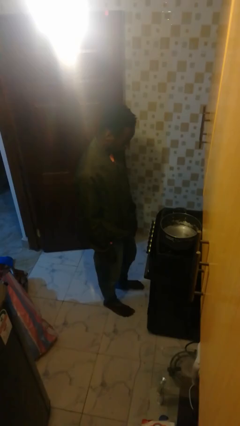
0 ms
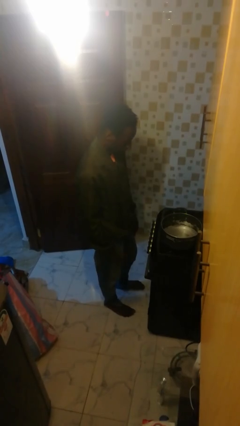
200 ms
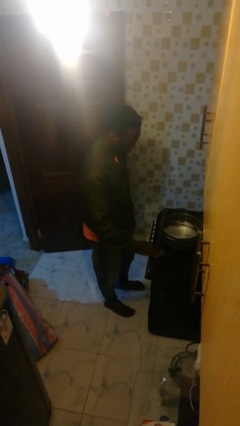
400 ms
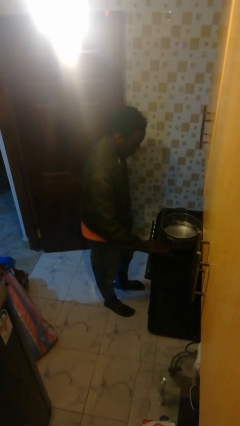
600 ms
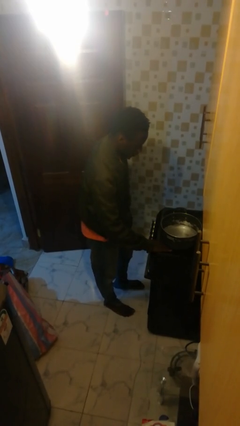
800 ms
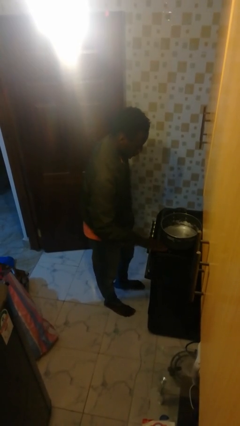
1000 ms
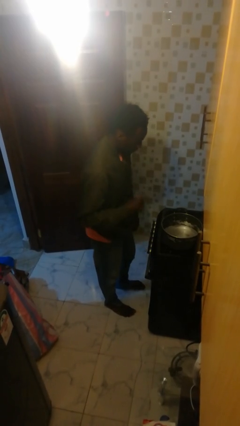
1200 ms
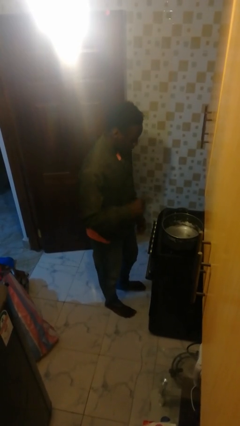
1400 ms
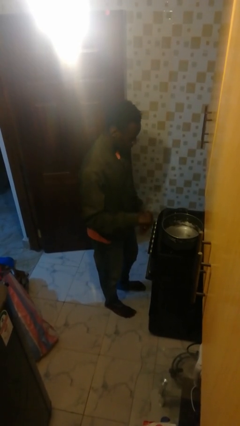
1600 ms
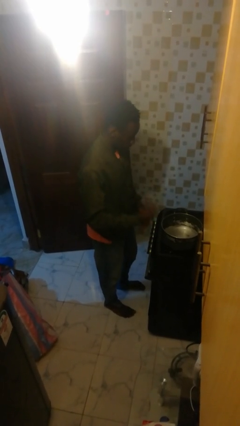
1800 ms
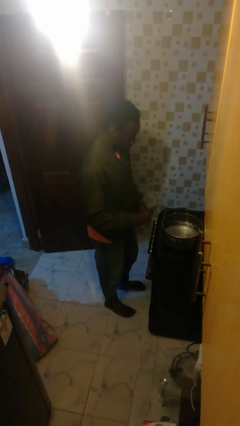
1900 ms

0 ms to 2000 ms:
person burns hand

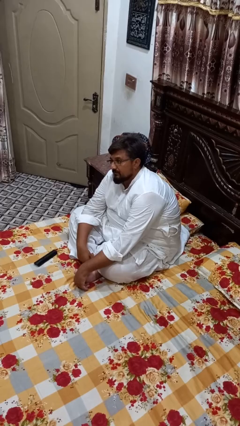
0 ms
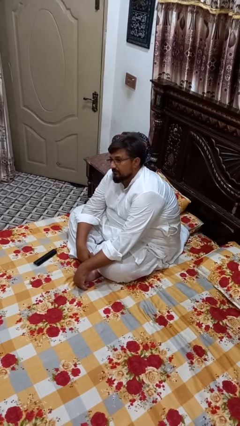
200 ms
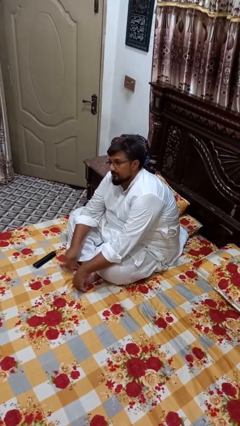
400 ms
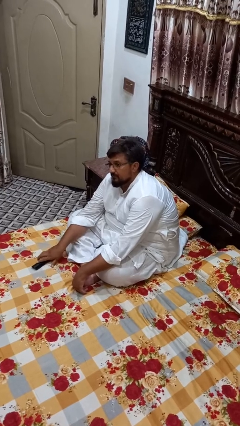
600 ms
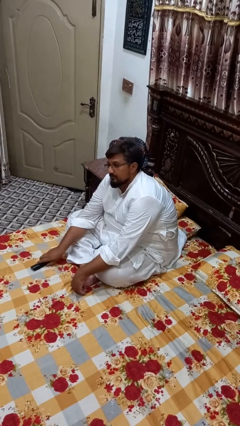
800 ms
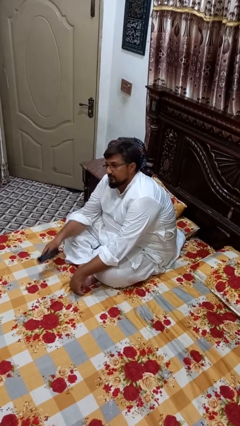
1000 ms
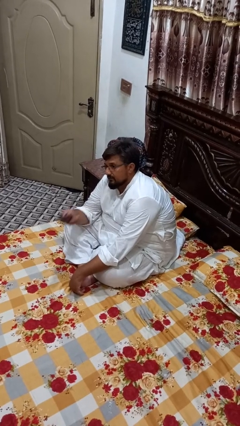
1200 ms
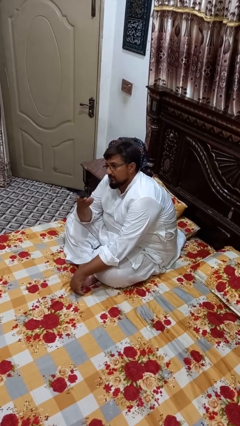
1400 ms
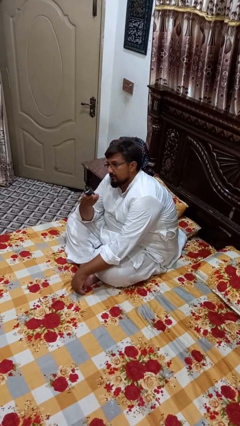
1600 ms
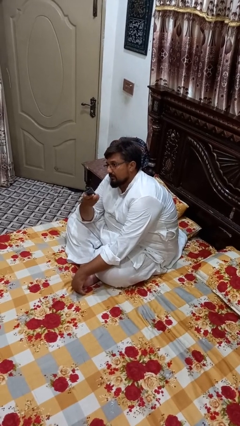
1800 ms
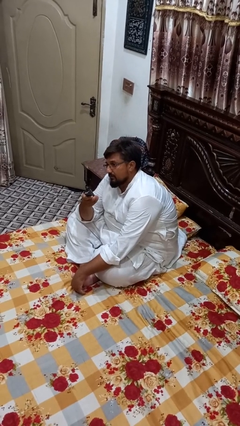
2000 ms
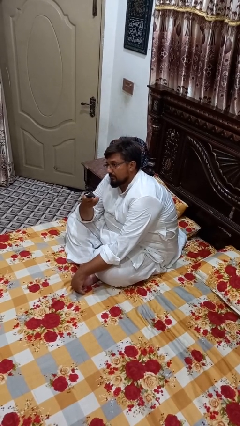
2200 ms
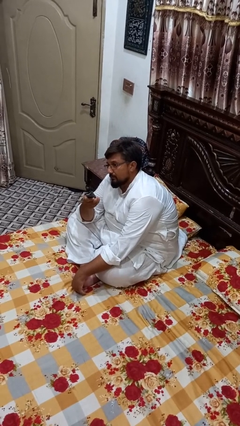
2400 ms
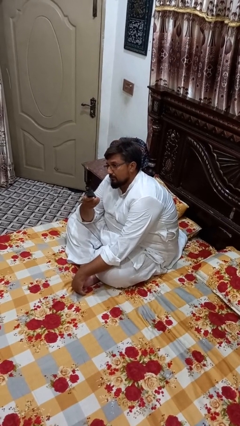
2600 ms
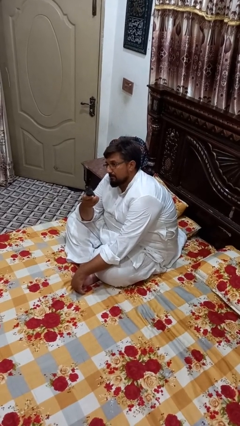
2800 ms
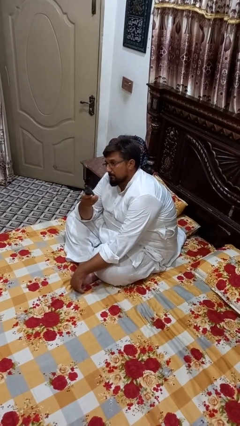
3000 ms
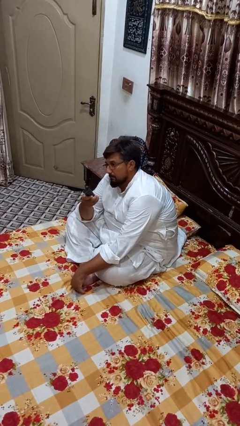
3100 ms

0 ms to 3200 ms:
person uses television remote

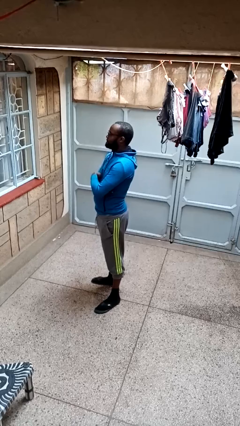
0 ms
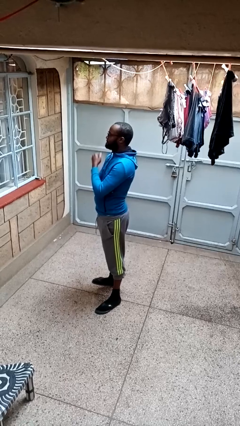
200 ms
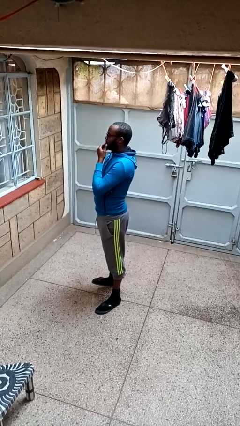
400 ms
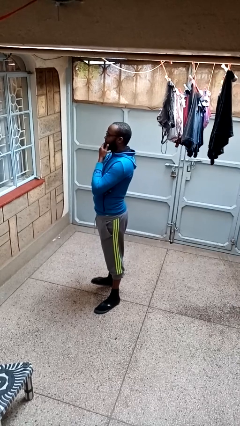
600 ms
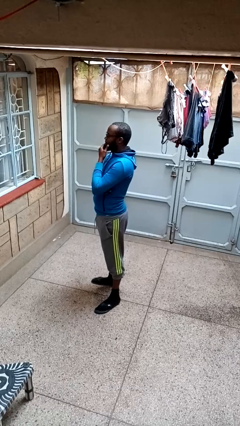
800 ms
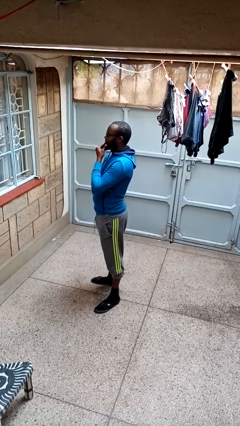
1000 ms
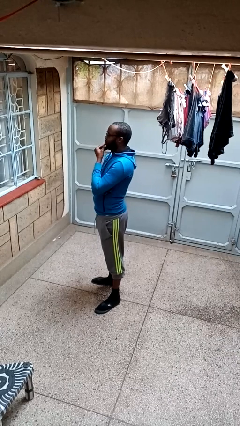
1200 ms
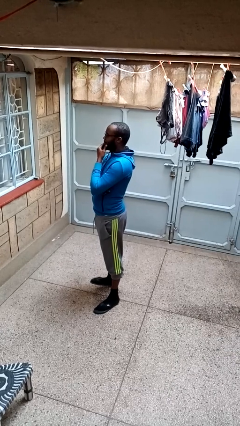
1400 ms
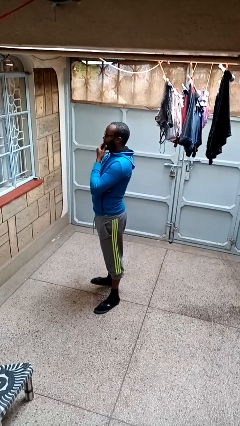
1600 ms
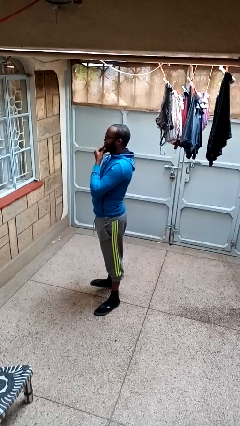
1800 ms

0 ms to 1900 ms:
person strokes chin

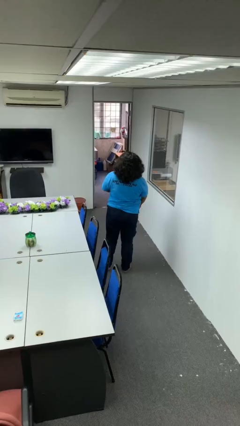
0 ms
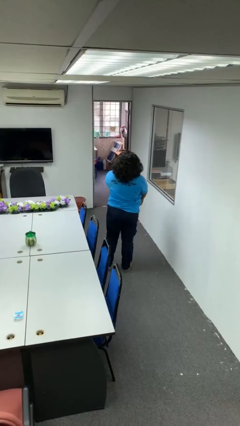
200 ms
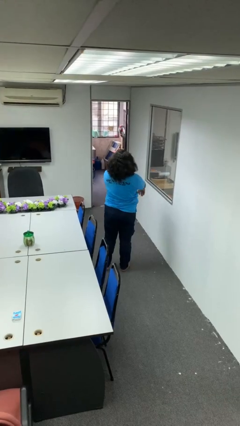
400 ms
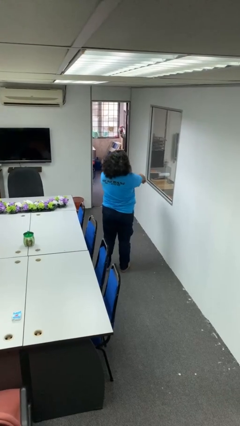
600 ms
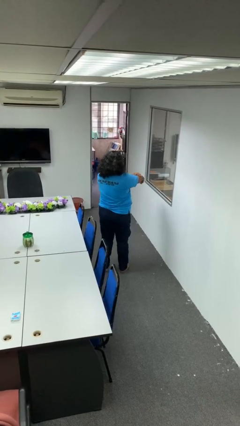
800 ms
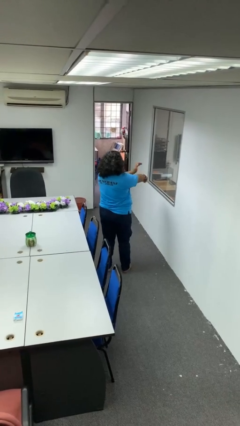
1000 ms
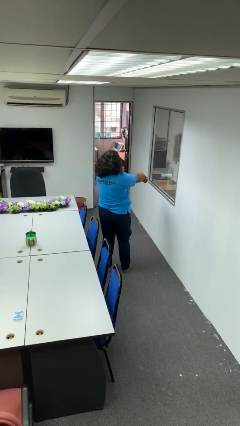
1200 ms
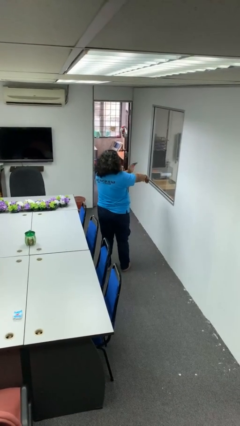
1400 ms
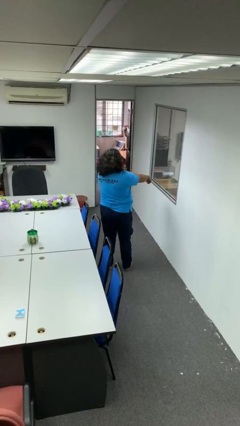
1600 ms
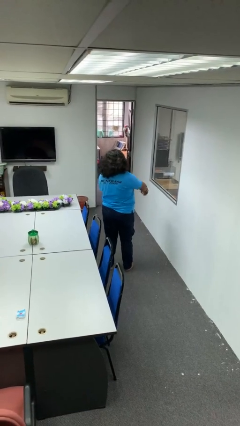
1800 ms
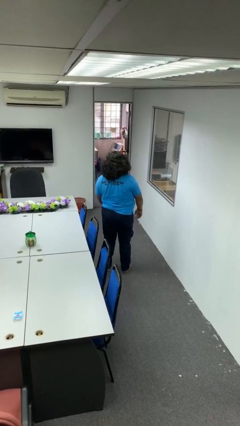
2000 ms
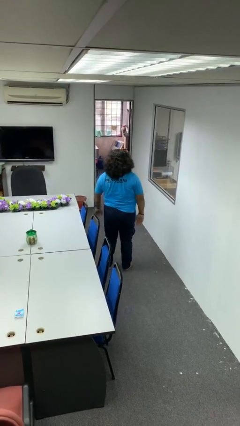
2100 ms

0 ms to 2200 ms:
person swats bug

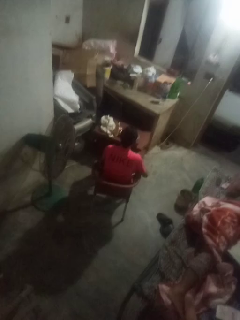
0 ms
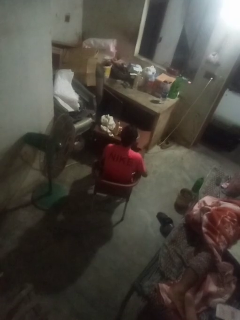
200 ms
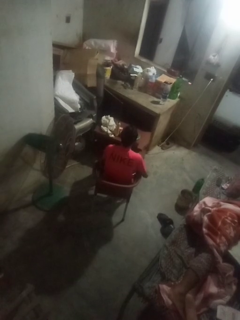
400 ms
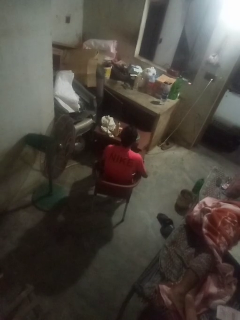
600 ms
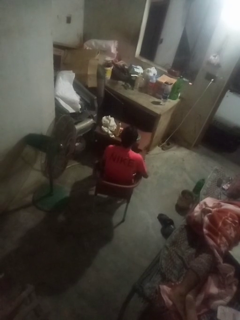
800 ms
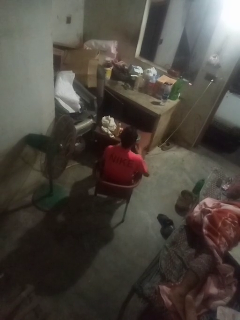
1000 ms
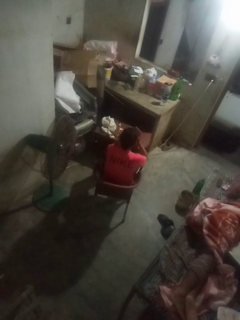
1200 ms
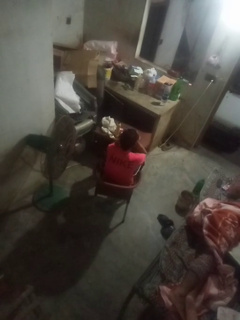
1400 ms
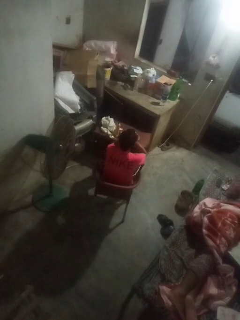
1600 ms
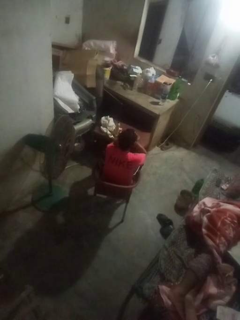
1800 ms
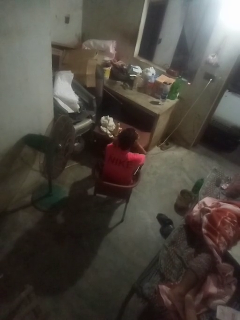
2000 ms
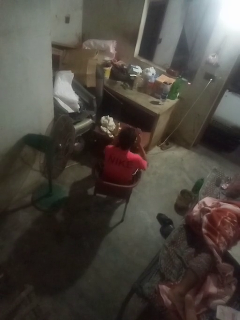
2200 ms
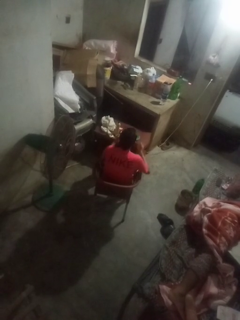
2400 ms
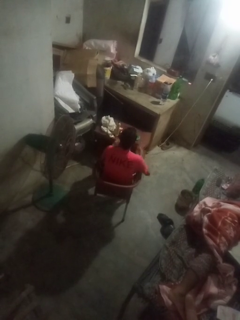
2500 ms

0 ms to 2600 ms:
person yawns

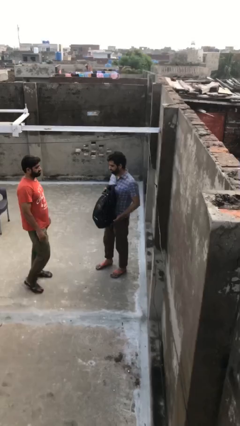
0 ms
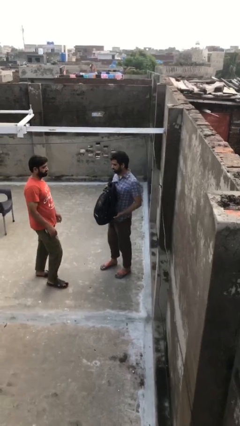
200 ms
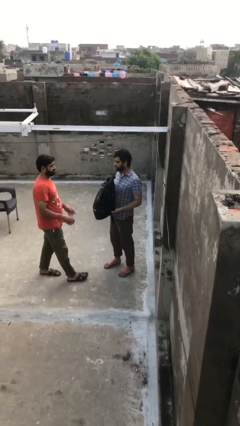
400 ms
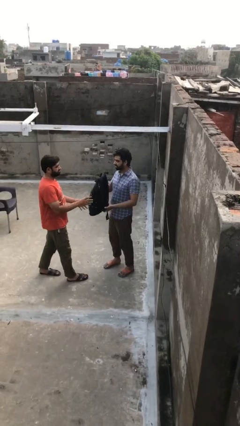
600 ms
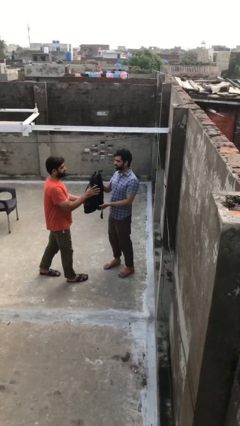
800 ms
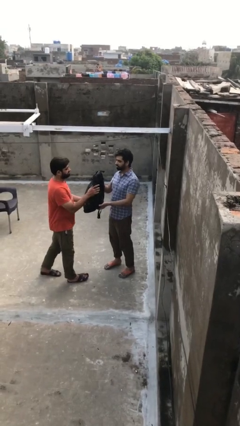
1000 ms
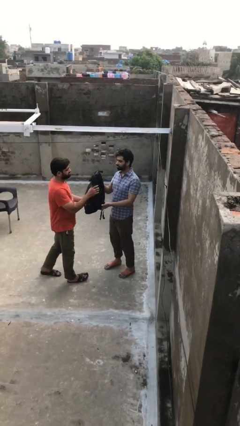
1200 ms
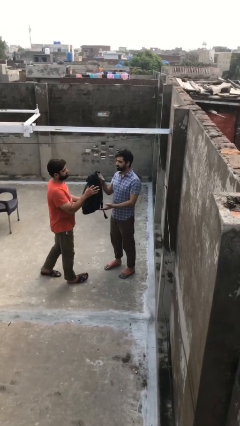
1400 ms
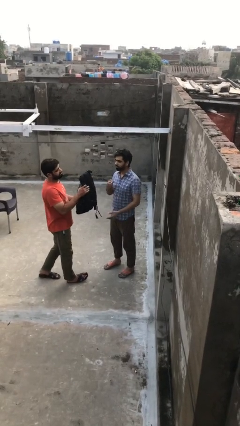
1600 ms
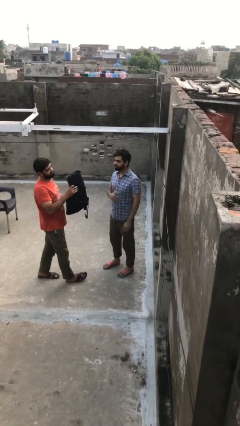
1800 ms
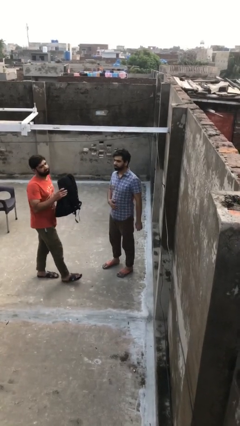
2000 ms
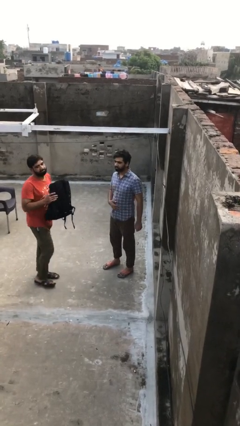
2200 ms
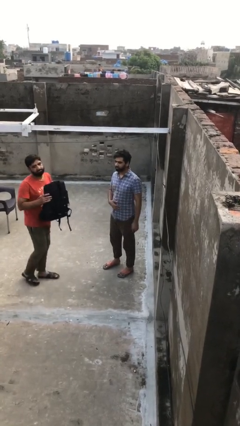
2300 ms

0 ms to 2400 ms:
person transfers object to person

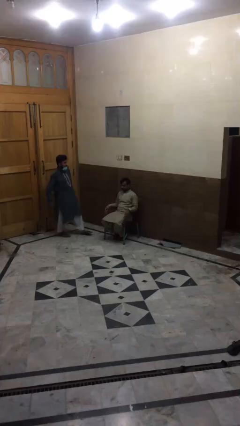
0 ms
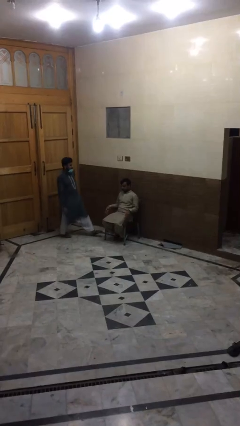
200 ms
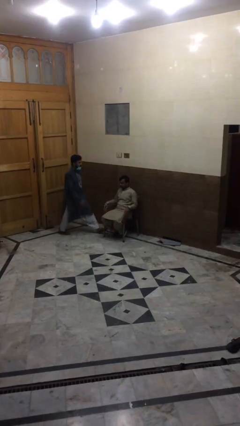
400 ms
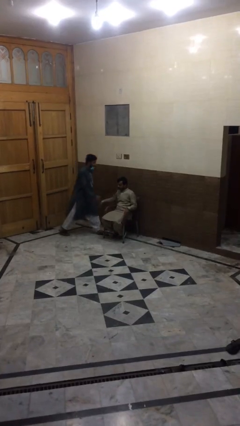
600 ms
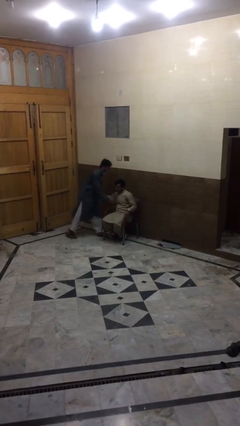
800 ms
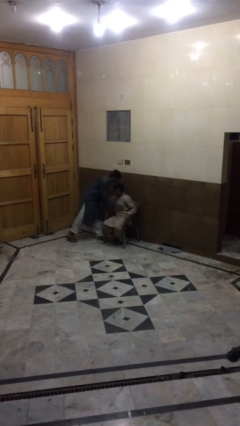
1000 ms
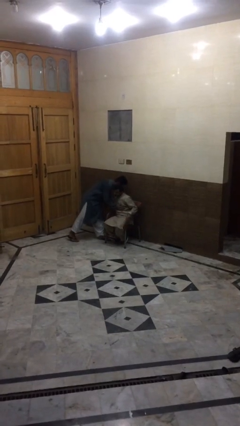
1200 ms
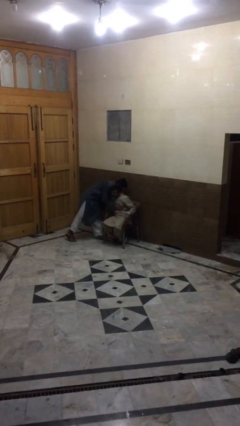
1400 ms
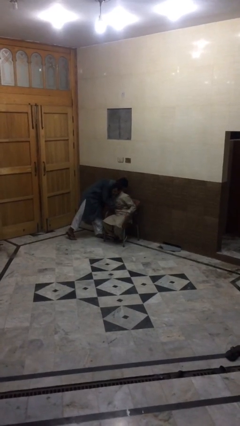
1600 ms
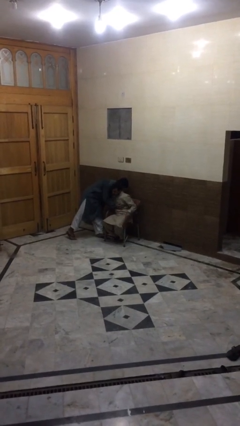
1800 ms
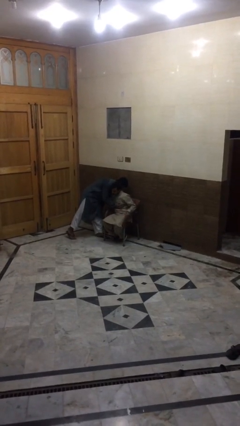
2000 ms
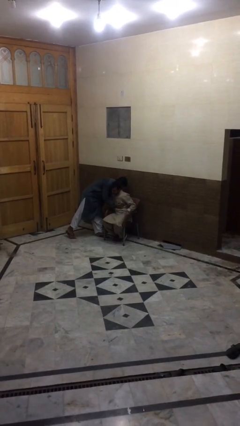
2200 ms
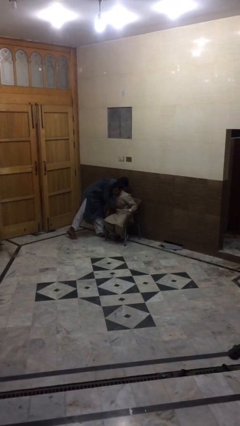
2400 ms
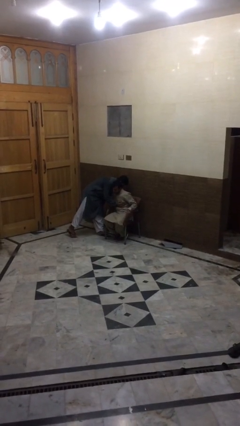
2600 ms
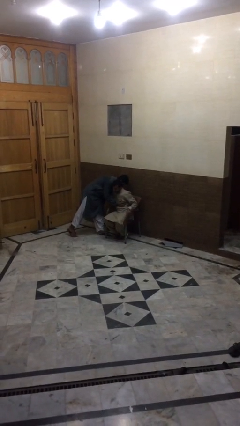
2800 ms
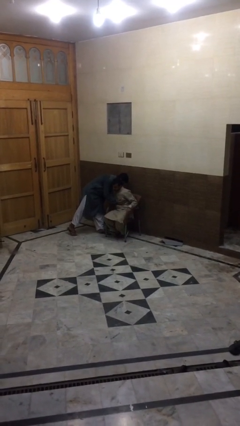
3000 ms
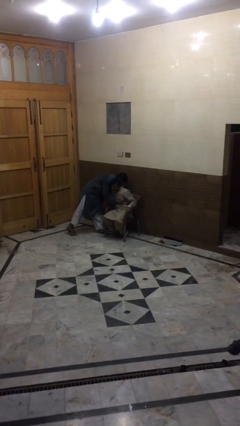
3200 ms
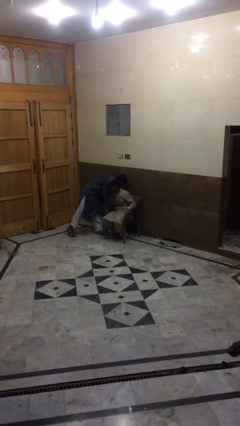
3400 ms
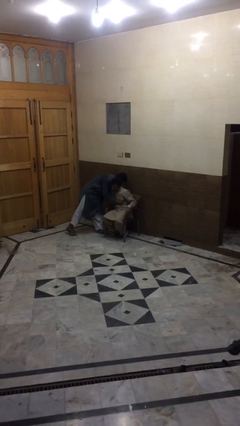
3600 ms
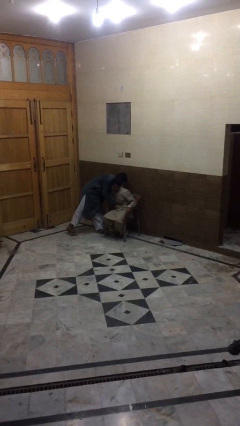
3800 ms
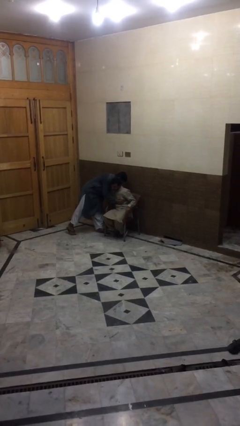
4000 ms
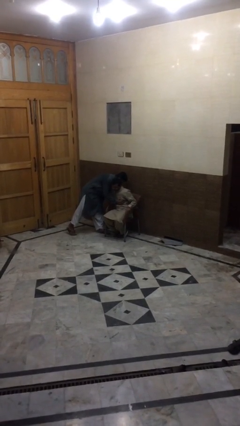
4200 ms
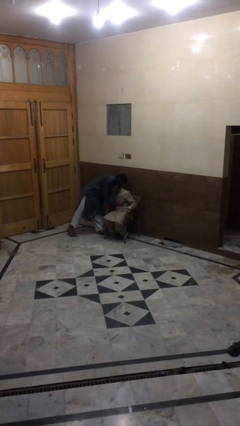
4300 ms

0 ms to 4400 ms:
person embraces person
